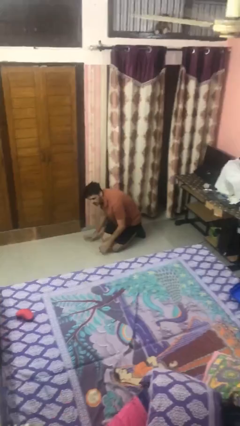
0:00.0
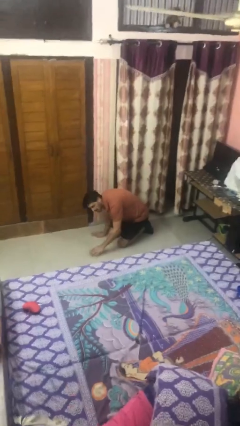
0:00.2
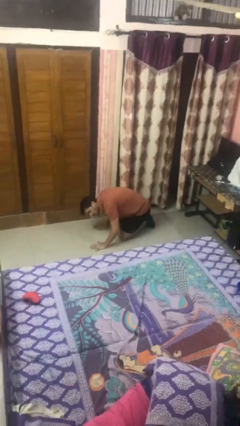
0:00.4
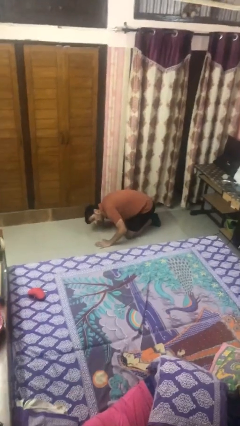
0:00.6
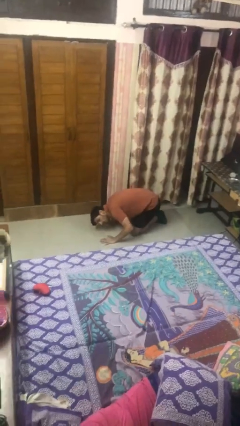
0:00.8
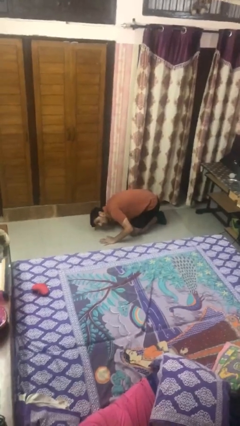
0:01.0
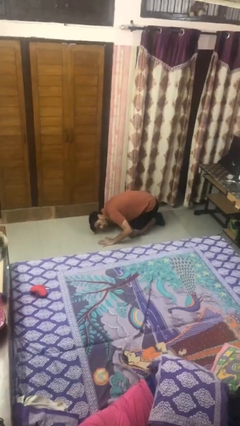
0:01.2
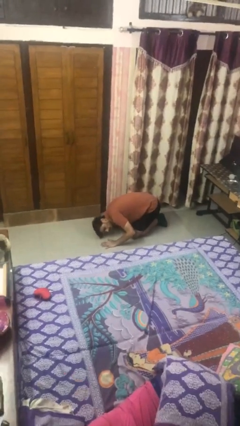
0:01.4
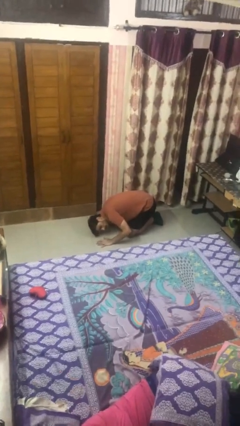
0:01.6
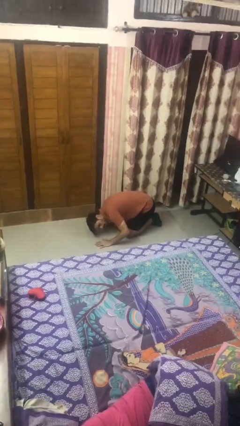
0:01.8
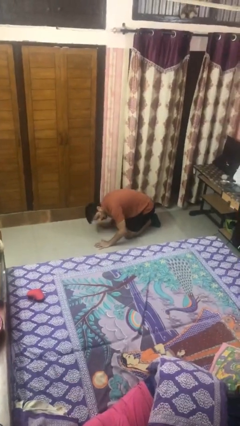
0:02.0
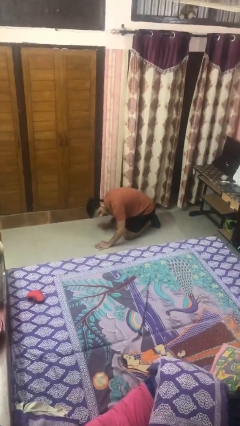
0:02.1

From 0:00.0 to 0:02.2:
person searches under bed

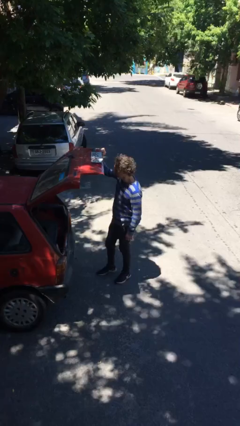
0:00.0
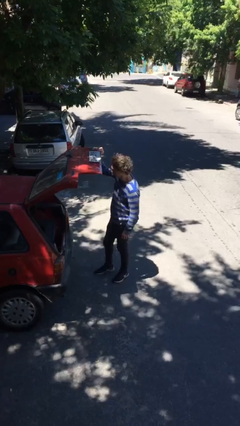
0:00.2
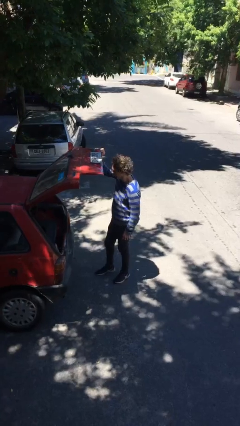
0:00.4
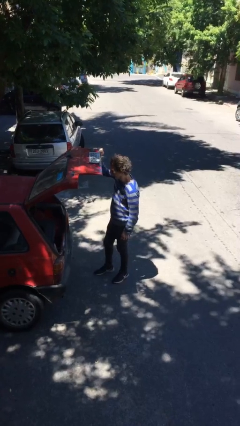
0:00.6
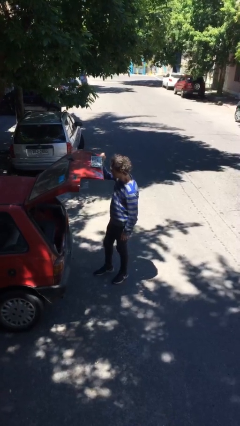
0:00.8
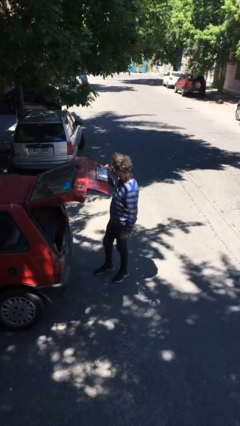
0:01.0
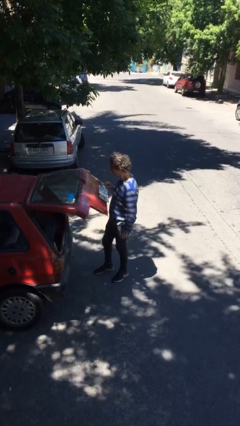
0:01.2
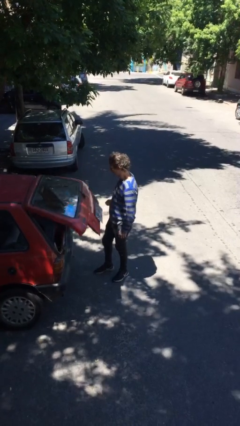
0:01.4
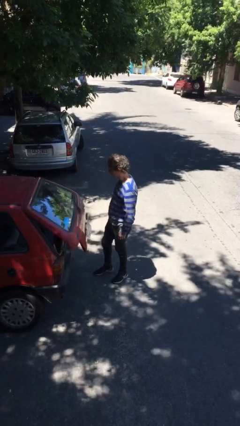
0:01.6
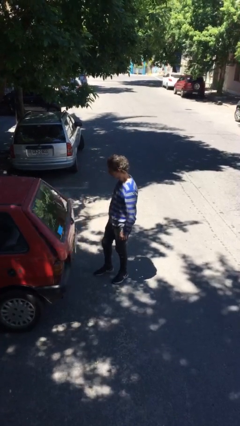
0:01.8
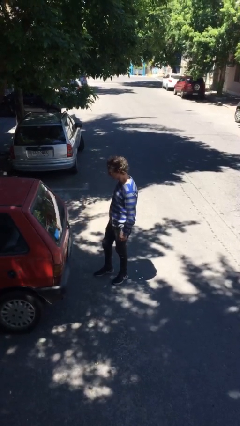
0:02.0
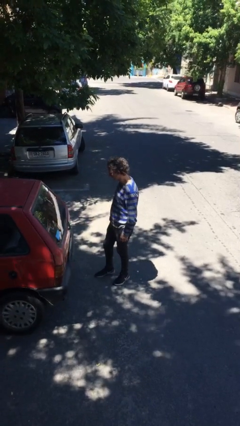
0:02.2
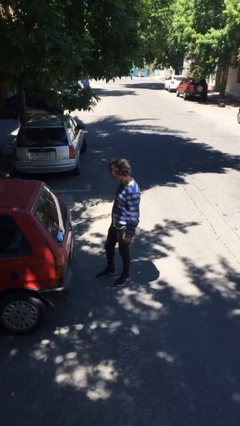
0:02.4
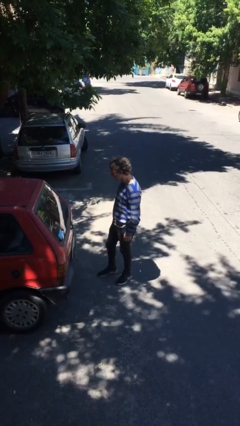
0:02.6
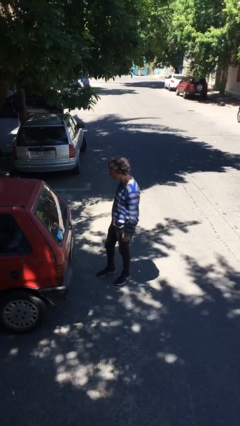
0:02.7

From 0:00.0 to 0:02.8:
person closes car trunk

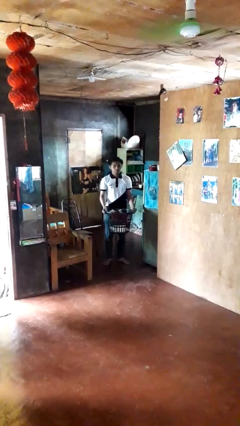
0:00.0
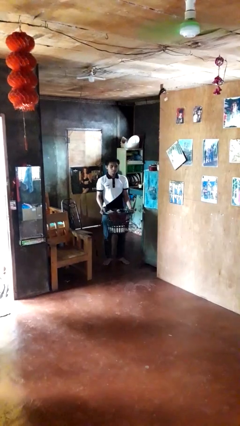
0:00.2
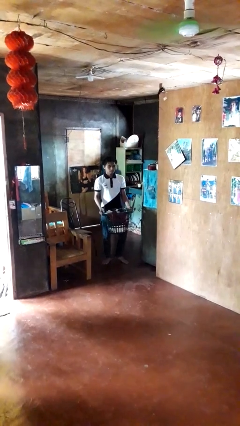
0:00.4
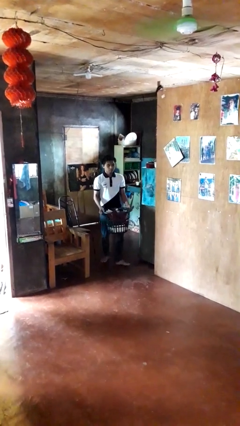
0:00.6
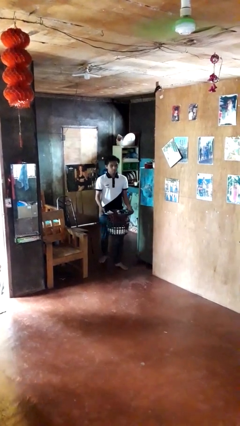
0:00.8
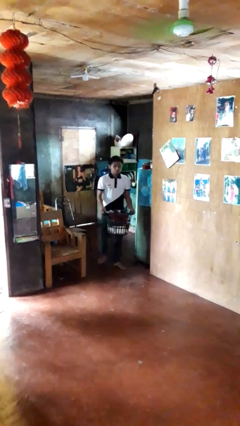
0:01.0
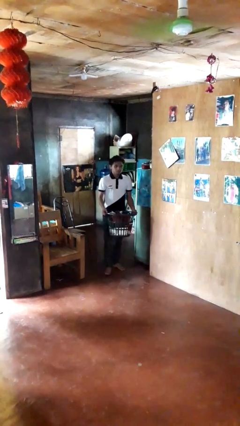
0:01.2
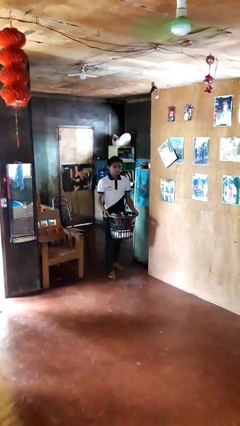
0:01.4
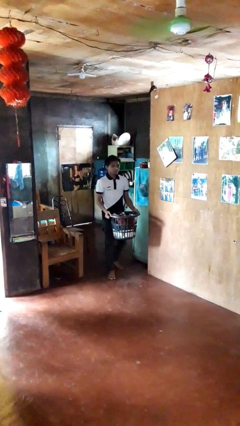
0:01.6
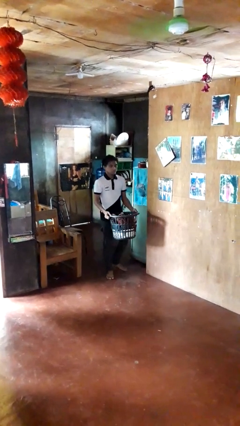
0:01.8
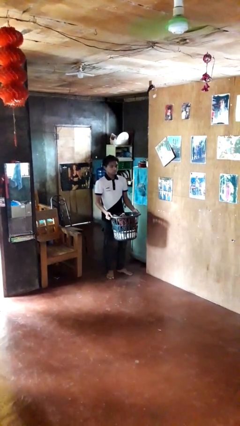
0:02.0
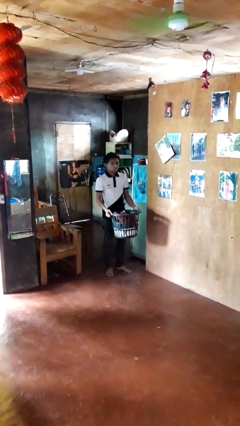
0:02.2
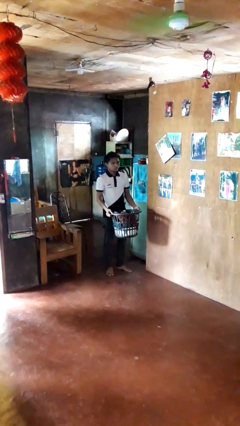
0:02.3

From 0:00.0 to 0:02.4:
person carries laundry basket

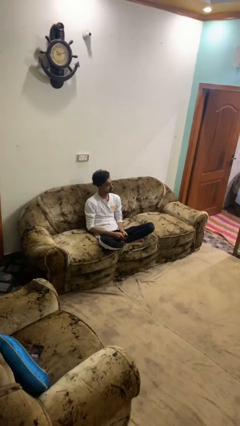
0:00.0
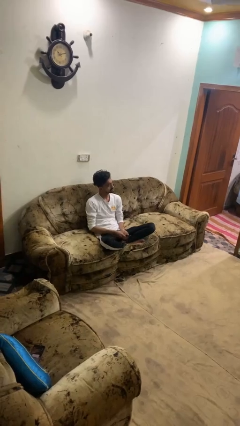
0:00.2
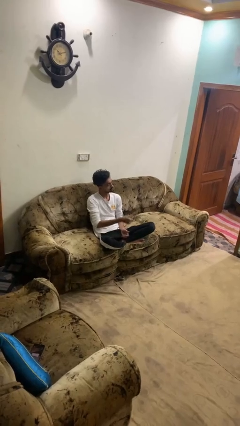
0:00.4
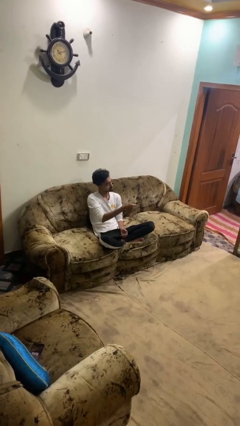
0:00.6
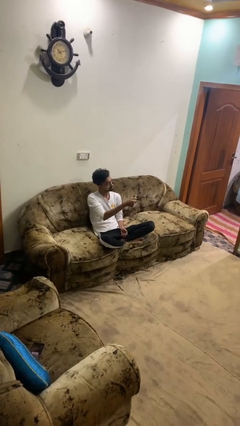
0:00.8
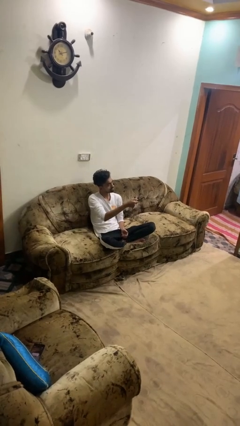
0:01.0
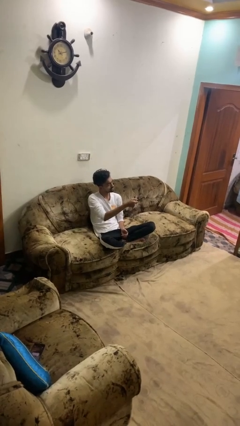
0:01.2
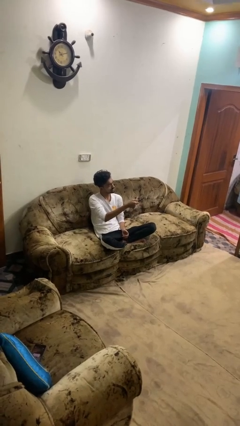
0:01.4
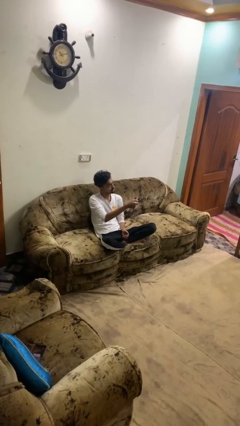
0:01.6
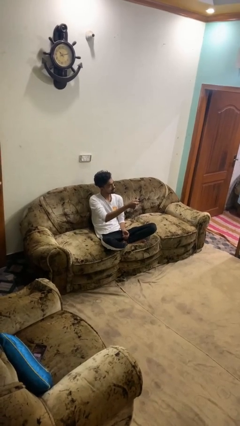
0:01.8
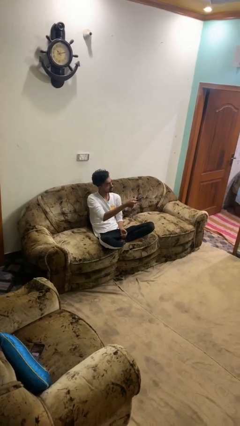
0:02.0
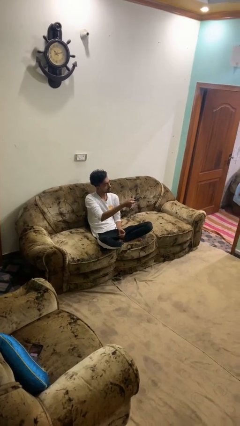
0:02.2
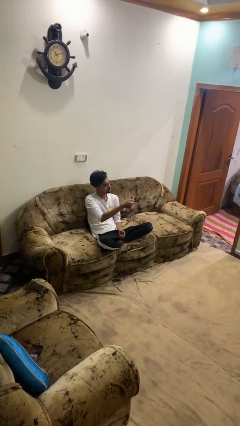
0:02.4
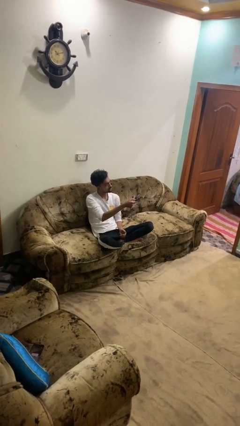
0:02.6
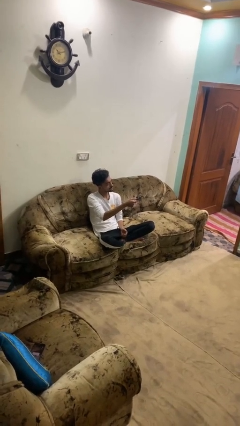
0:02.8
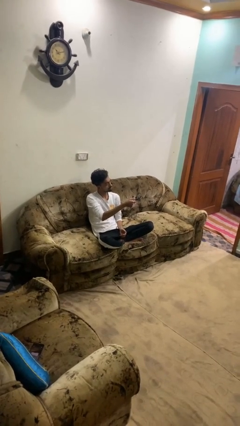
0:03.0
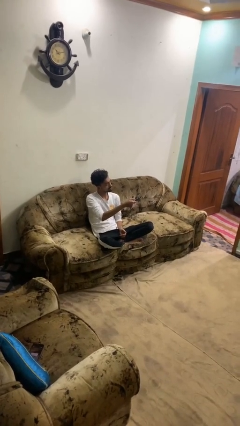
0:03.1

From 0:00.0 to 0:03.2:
person uses television remote

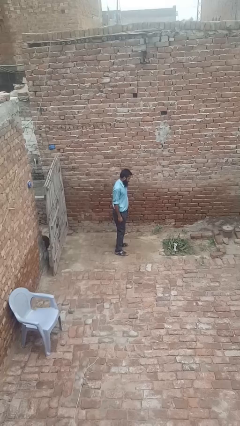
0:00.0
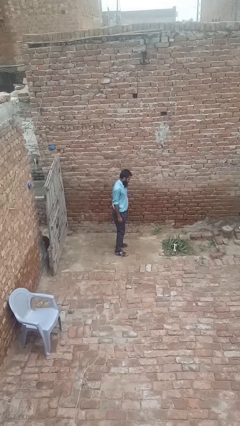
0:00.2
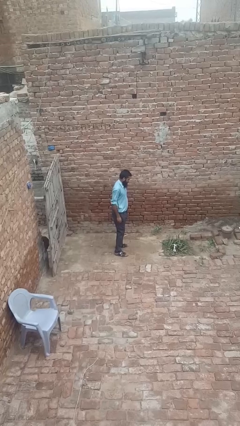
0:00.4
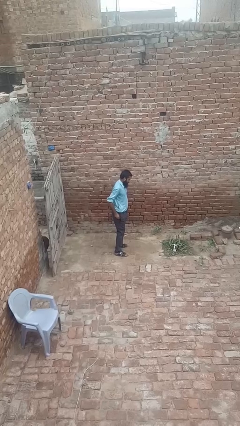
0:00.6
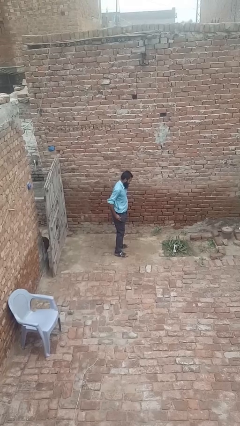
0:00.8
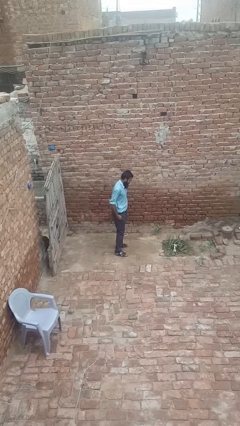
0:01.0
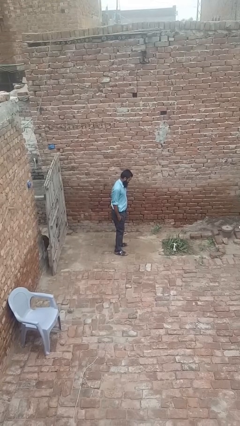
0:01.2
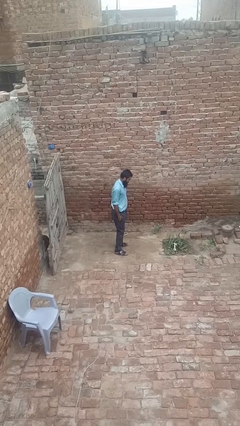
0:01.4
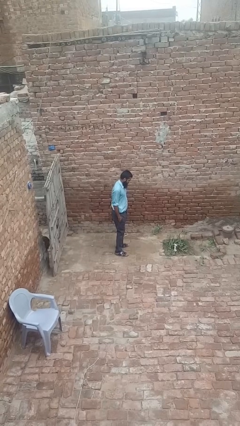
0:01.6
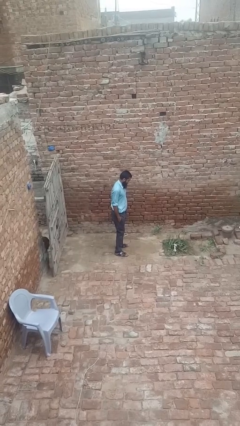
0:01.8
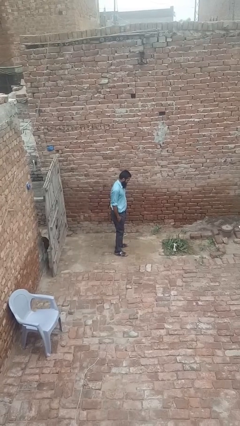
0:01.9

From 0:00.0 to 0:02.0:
person puts hands in back pockets

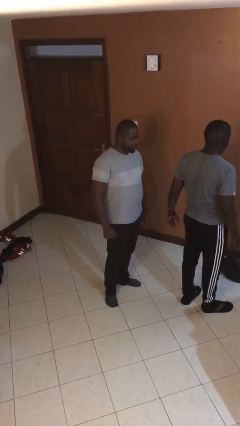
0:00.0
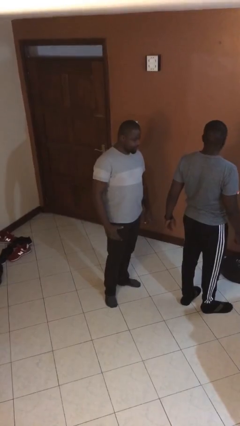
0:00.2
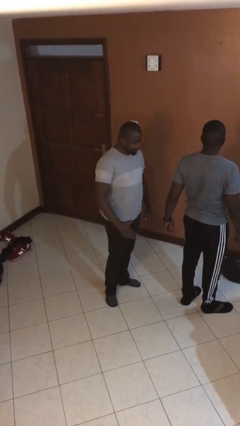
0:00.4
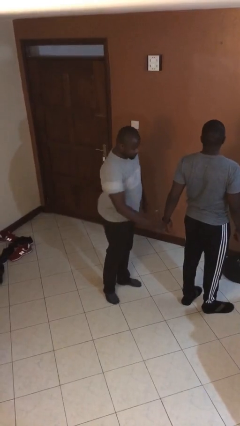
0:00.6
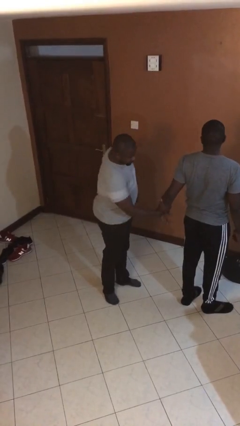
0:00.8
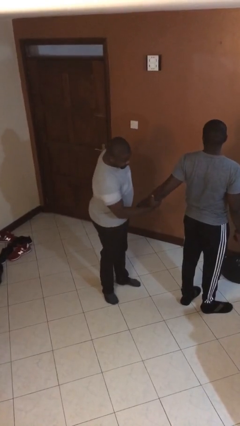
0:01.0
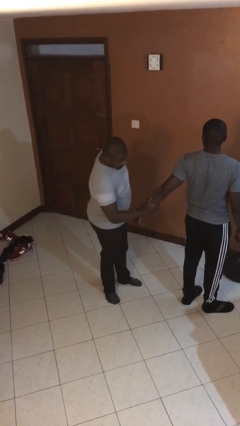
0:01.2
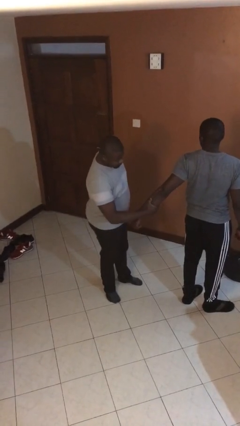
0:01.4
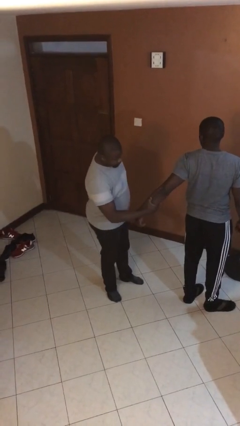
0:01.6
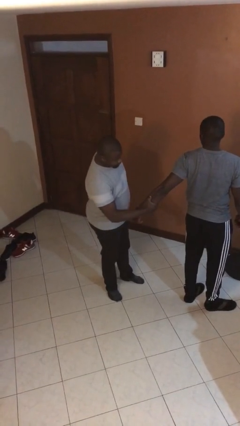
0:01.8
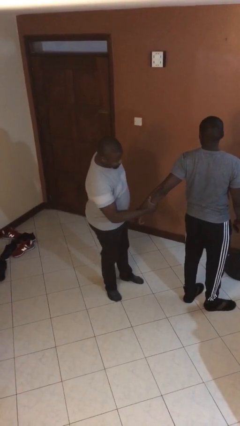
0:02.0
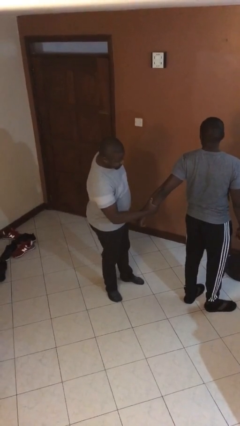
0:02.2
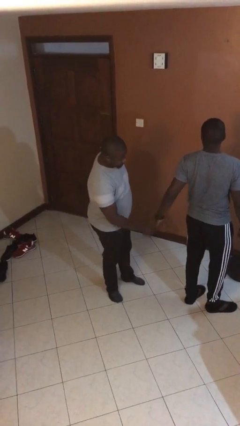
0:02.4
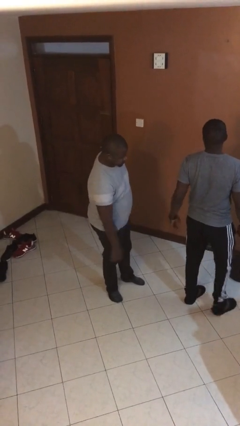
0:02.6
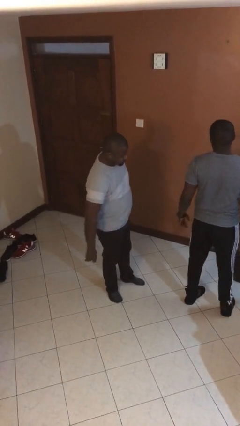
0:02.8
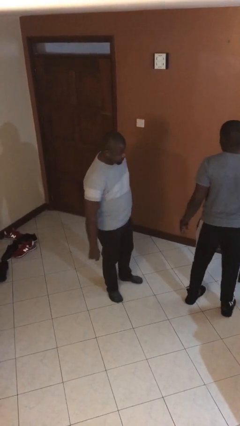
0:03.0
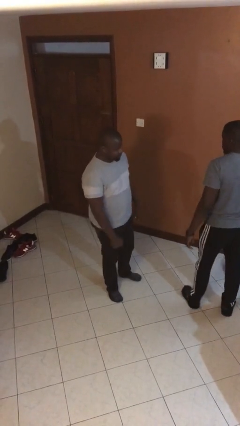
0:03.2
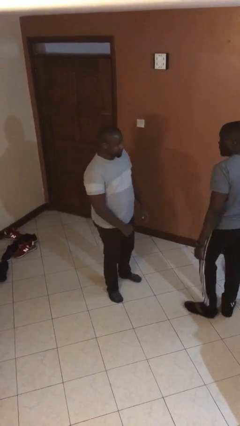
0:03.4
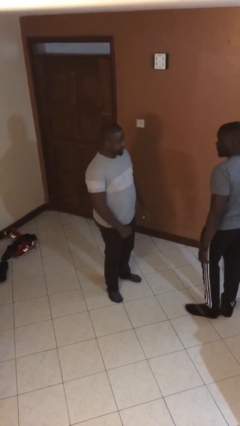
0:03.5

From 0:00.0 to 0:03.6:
person grabs person by forearm

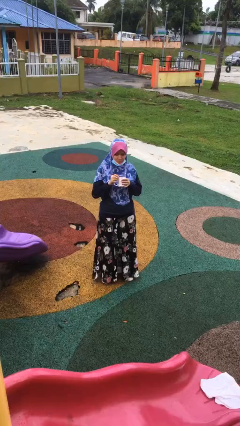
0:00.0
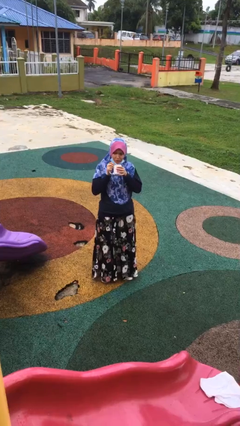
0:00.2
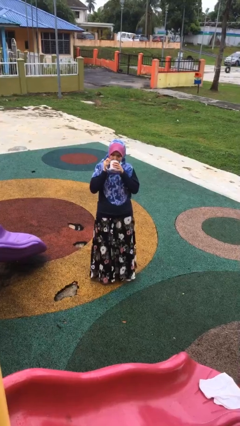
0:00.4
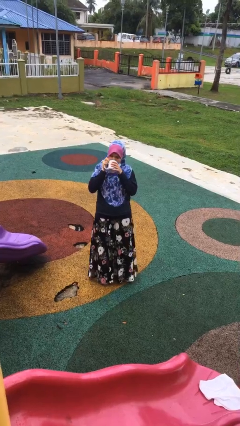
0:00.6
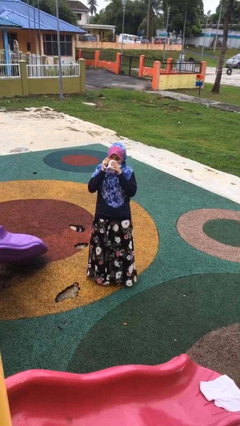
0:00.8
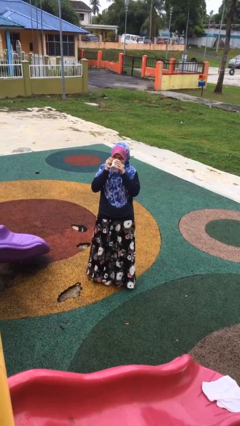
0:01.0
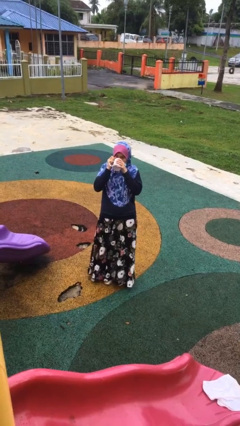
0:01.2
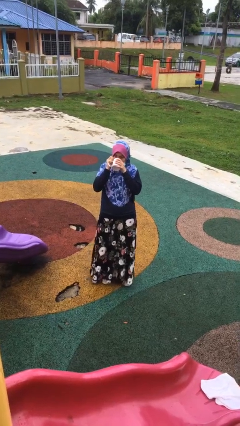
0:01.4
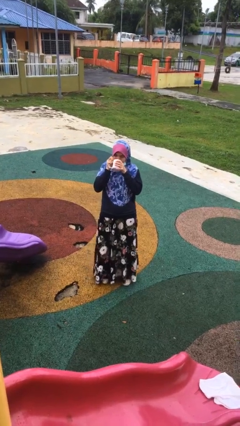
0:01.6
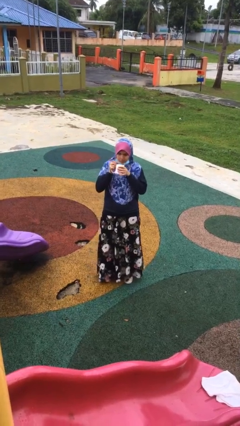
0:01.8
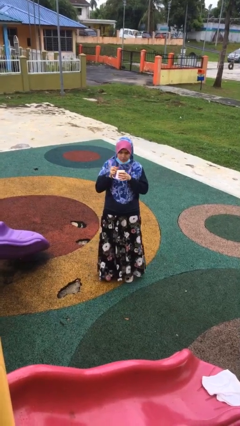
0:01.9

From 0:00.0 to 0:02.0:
person drinks from mug
